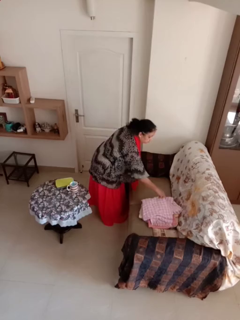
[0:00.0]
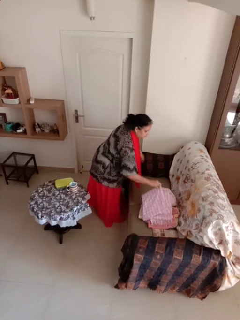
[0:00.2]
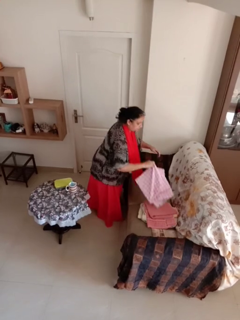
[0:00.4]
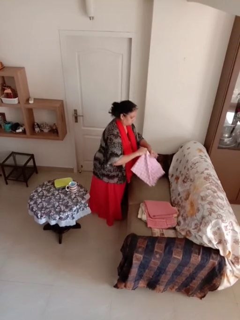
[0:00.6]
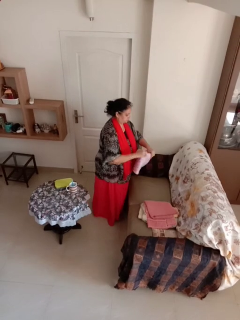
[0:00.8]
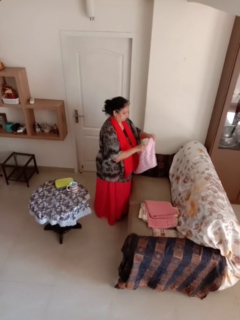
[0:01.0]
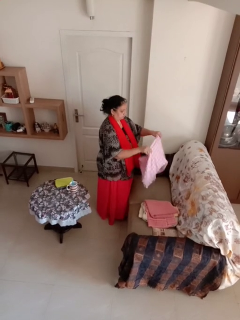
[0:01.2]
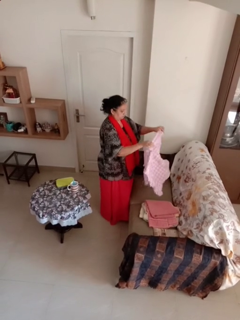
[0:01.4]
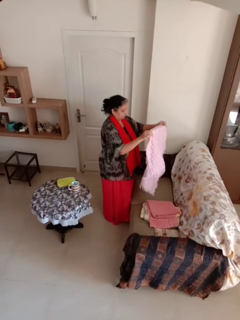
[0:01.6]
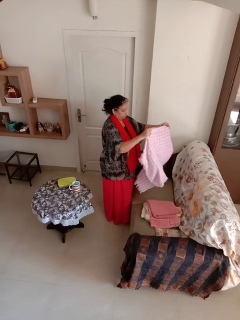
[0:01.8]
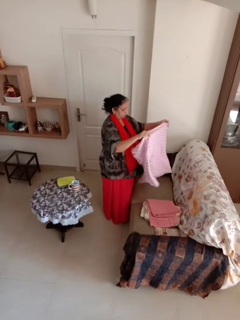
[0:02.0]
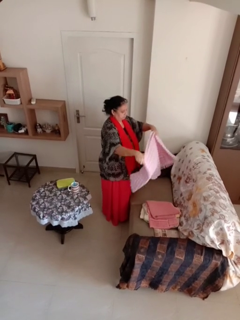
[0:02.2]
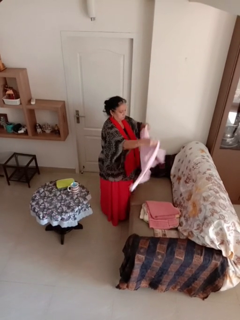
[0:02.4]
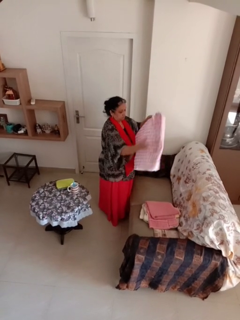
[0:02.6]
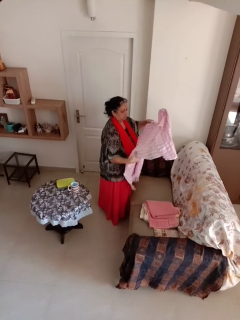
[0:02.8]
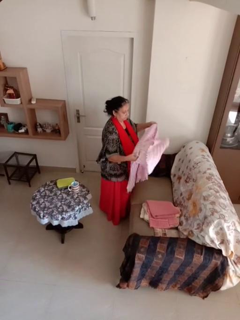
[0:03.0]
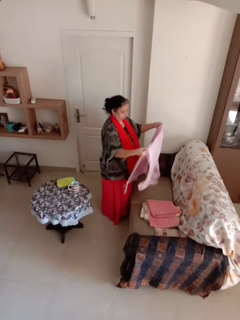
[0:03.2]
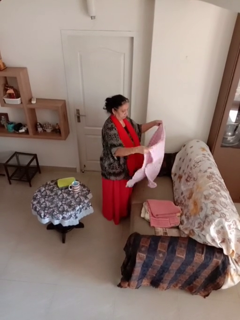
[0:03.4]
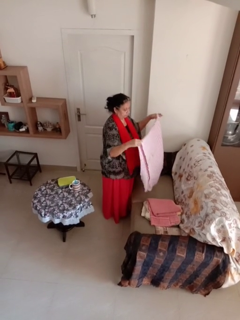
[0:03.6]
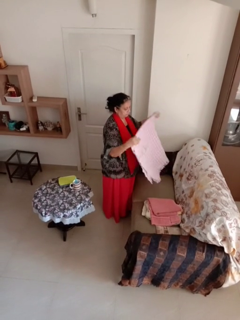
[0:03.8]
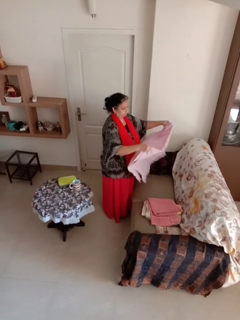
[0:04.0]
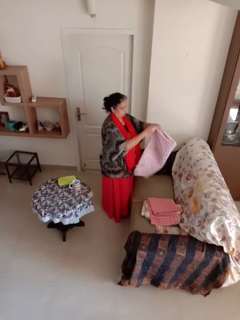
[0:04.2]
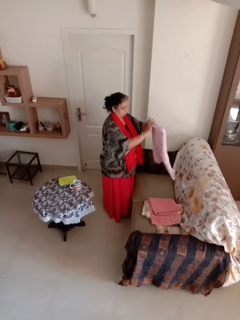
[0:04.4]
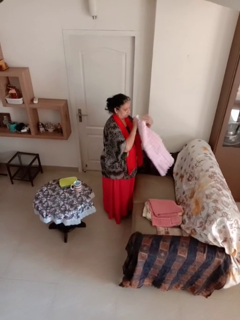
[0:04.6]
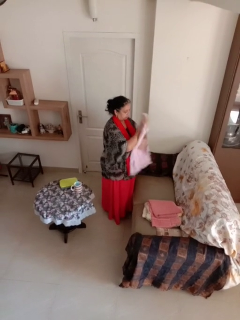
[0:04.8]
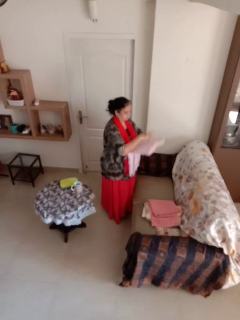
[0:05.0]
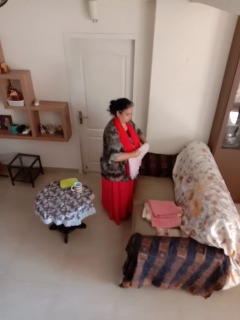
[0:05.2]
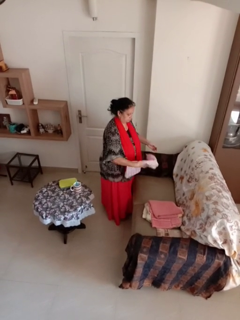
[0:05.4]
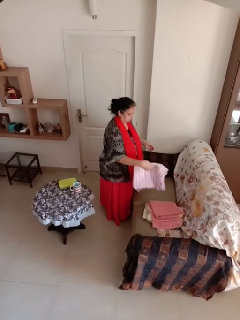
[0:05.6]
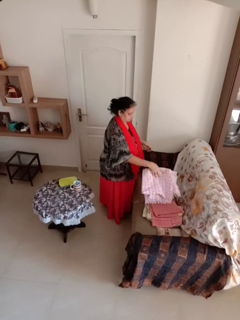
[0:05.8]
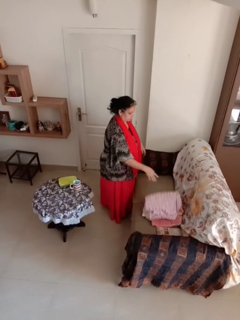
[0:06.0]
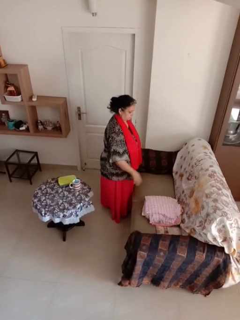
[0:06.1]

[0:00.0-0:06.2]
person folds towel

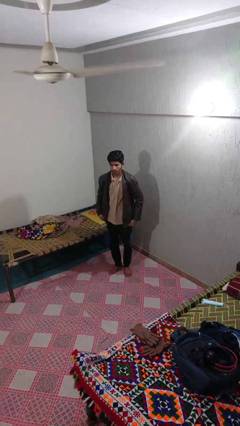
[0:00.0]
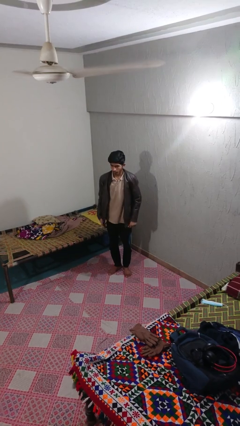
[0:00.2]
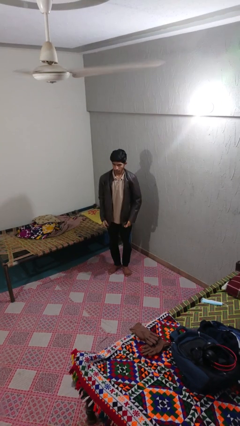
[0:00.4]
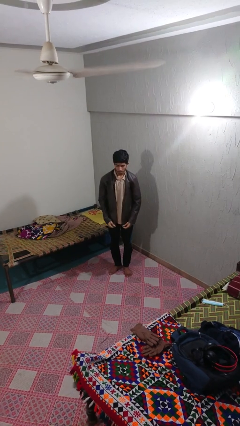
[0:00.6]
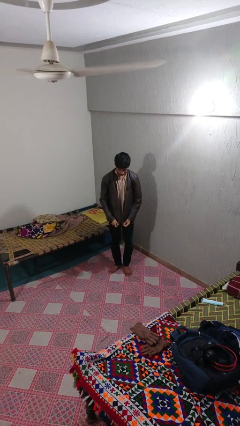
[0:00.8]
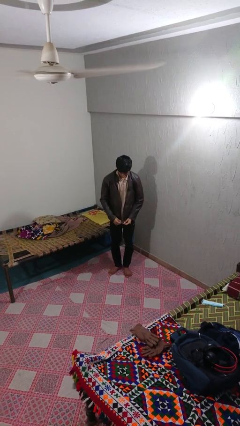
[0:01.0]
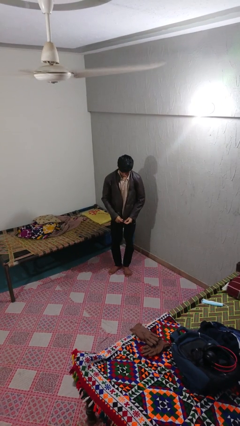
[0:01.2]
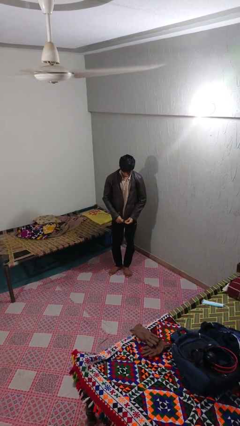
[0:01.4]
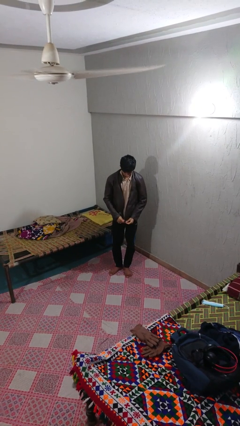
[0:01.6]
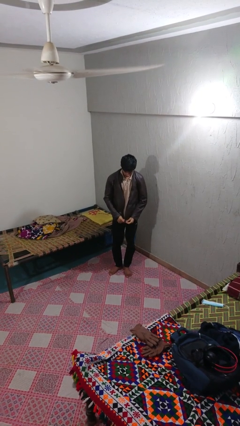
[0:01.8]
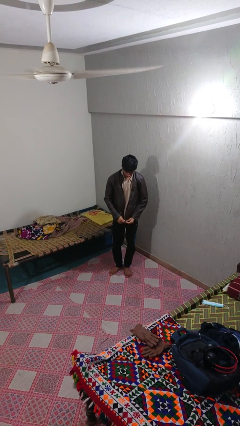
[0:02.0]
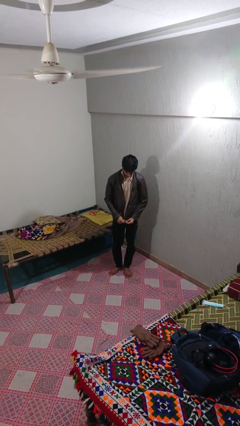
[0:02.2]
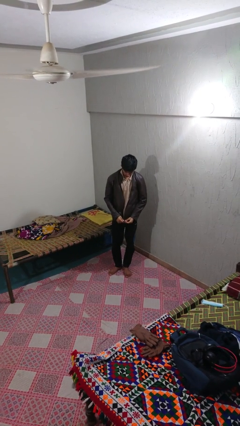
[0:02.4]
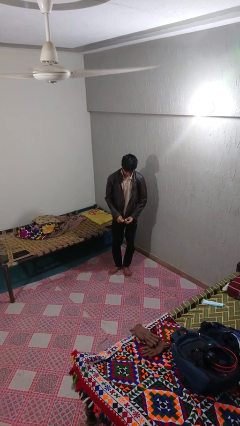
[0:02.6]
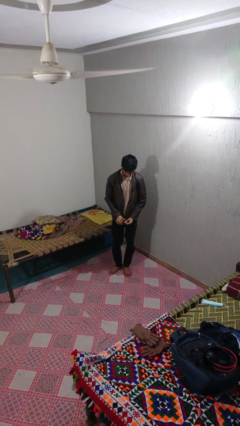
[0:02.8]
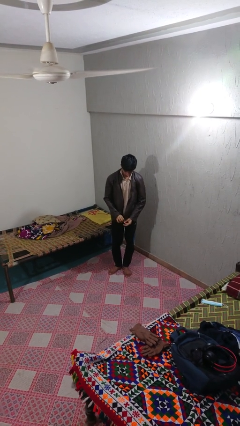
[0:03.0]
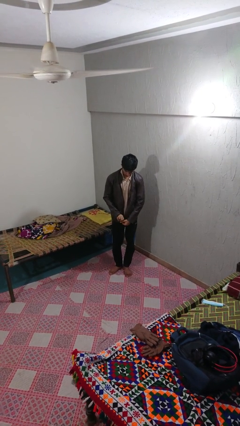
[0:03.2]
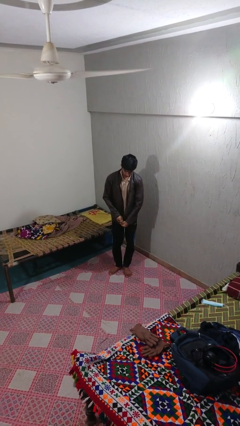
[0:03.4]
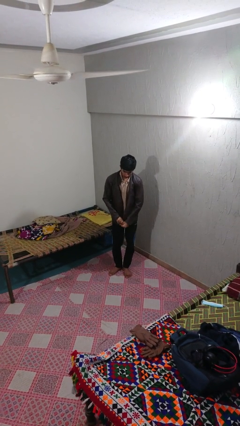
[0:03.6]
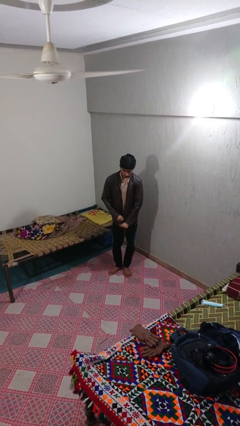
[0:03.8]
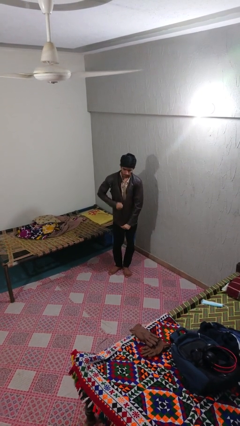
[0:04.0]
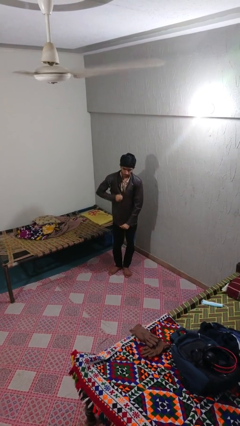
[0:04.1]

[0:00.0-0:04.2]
person zips up jacket

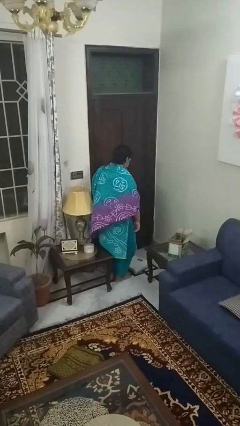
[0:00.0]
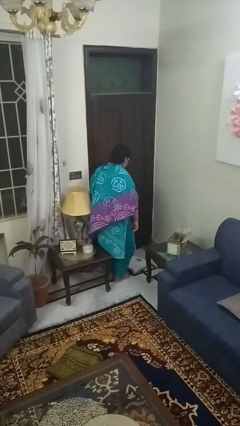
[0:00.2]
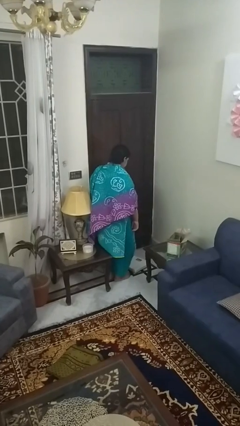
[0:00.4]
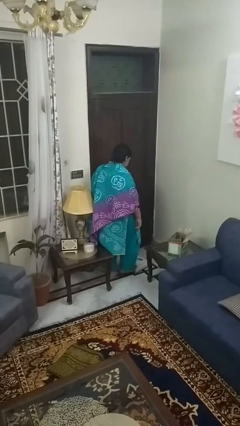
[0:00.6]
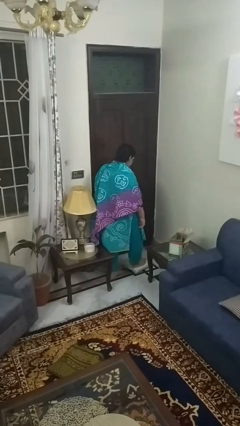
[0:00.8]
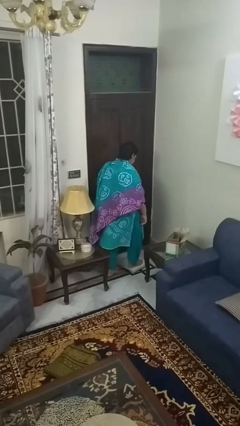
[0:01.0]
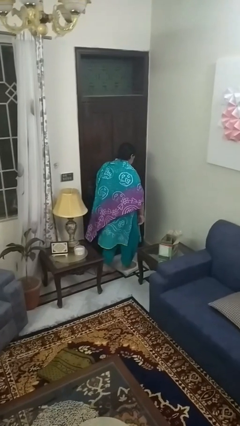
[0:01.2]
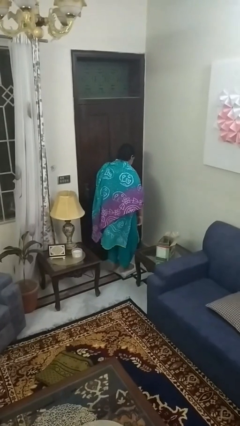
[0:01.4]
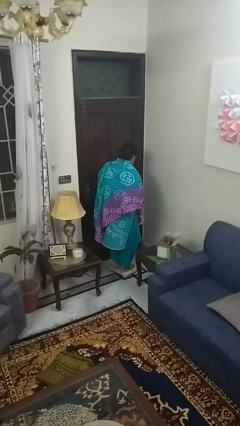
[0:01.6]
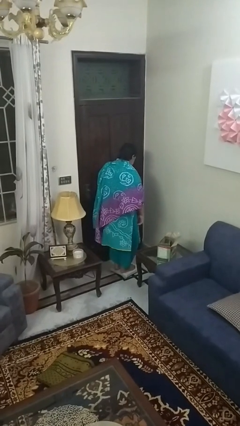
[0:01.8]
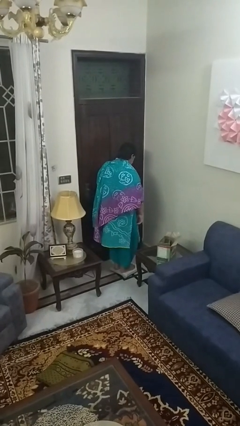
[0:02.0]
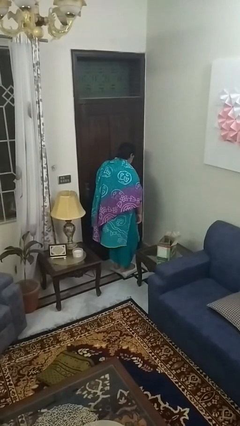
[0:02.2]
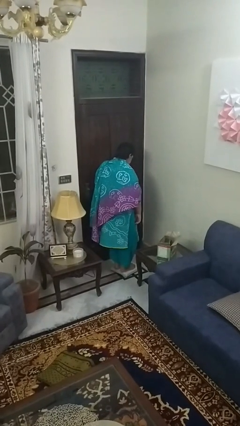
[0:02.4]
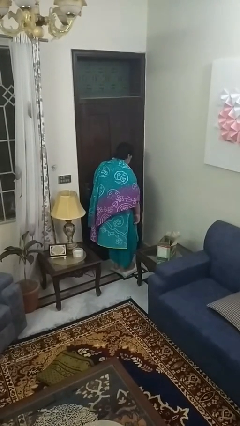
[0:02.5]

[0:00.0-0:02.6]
person uses bodyweight scale

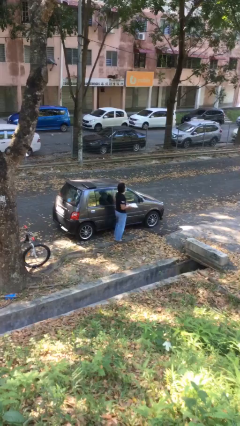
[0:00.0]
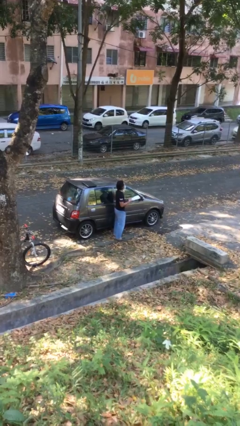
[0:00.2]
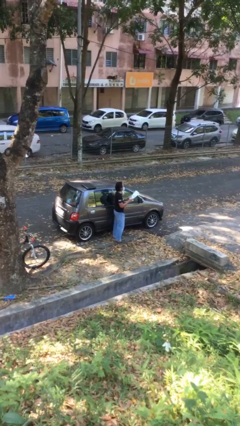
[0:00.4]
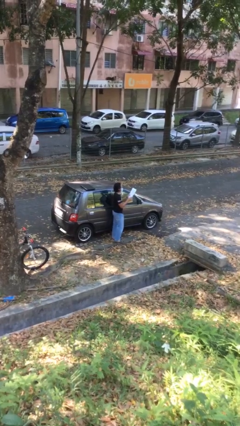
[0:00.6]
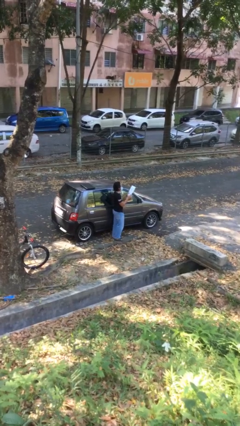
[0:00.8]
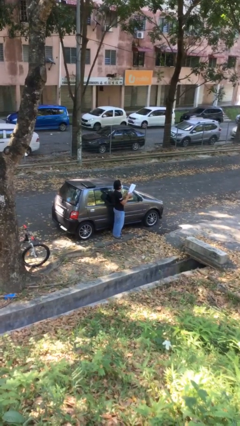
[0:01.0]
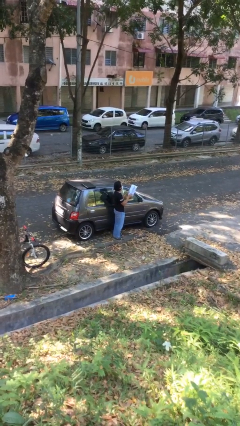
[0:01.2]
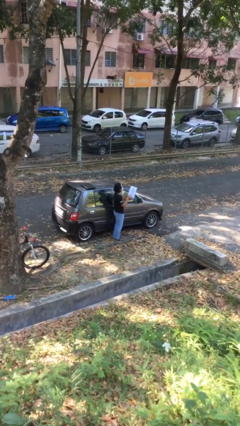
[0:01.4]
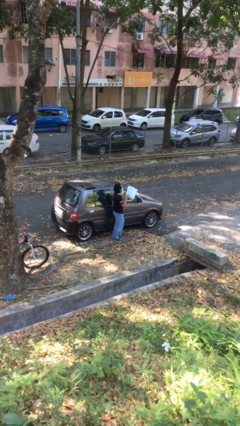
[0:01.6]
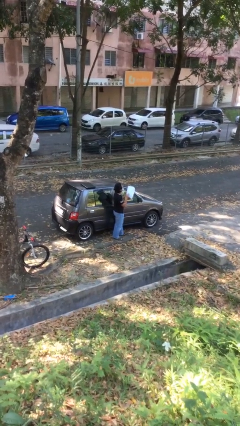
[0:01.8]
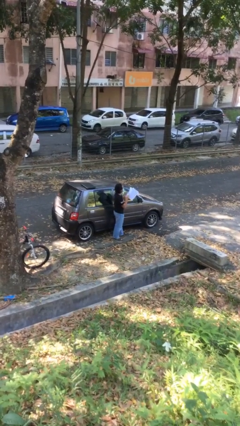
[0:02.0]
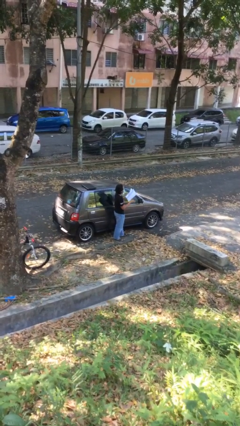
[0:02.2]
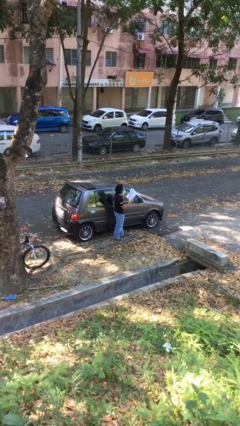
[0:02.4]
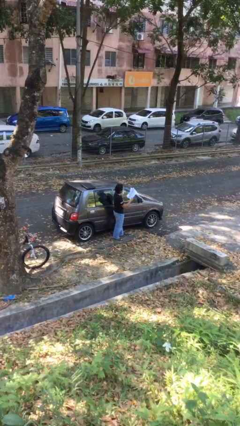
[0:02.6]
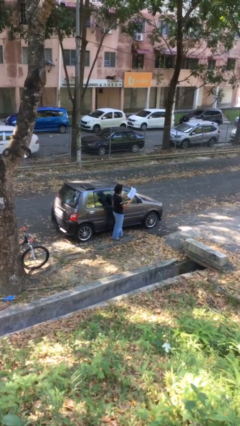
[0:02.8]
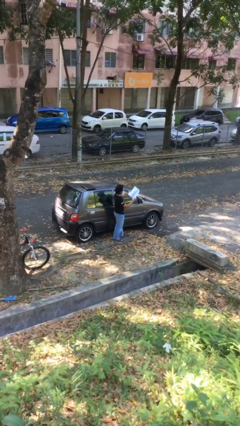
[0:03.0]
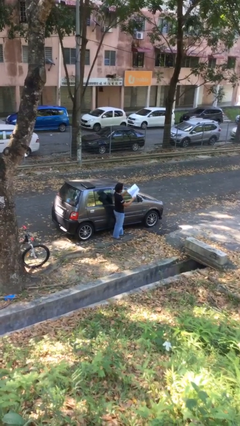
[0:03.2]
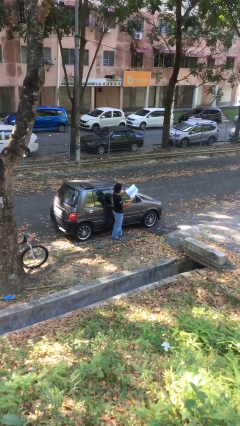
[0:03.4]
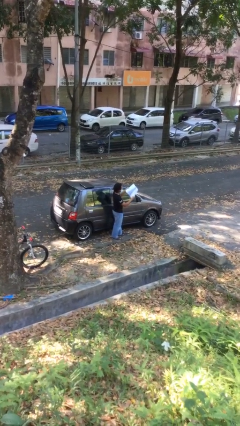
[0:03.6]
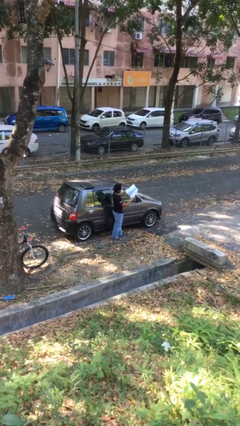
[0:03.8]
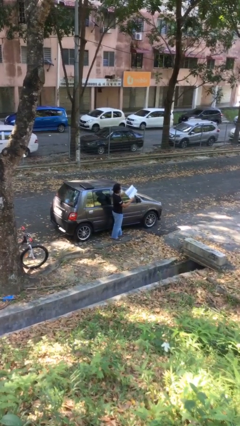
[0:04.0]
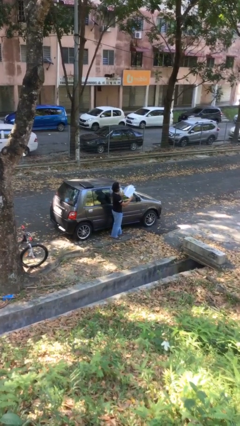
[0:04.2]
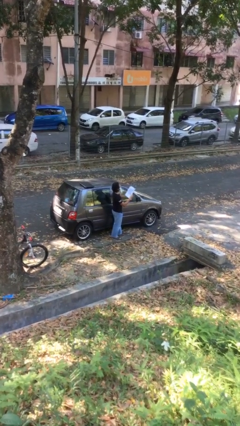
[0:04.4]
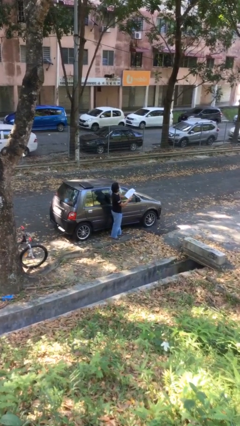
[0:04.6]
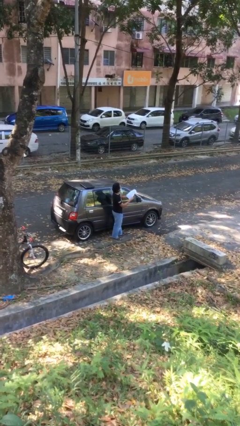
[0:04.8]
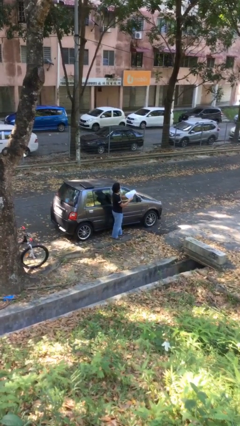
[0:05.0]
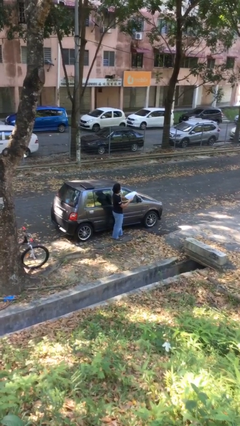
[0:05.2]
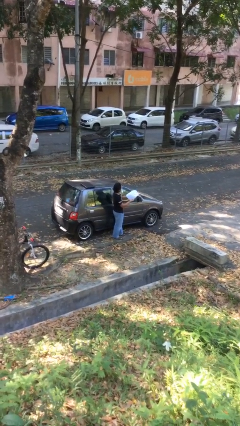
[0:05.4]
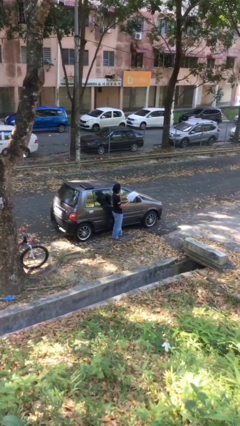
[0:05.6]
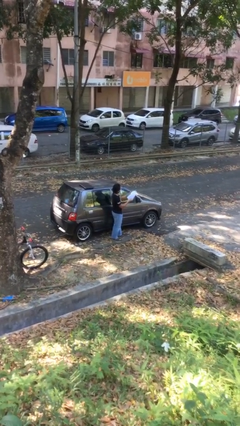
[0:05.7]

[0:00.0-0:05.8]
person reads document

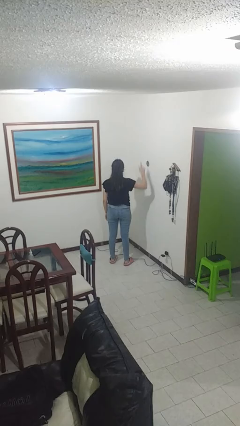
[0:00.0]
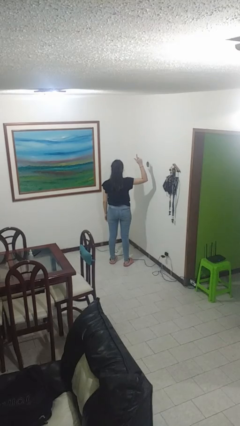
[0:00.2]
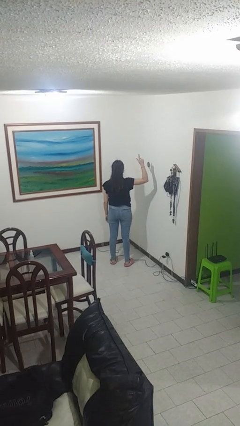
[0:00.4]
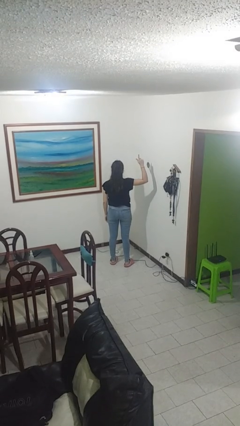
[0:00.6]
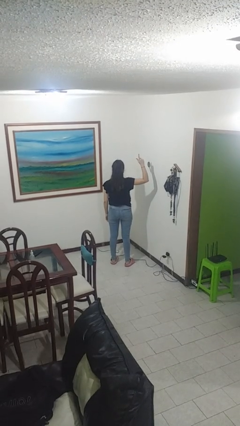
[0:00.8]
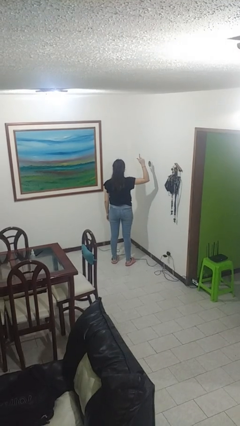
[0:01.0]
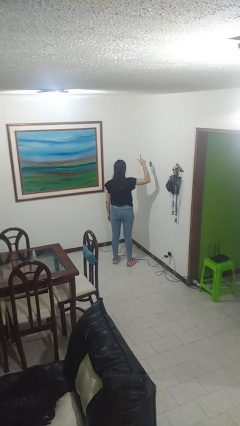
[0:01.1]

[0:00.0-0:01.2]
person gestures number one
